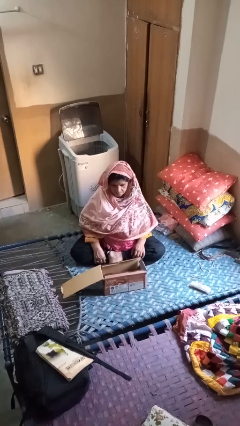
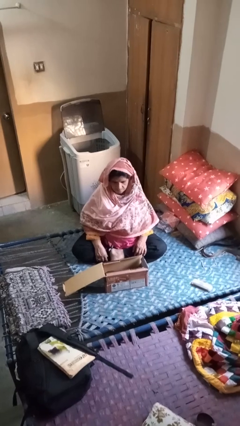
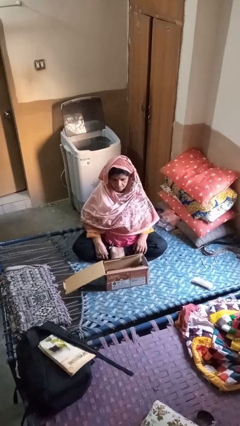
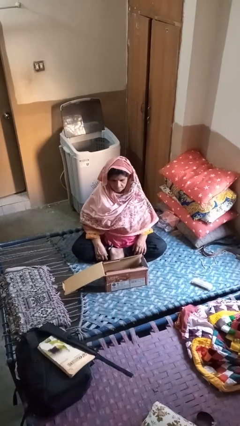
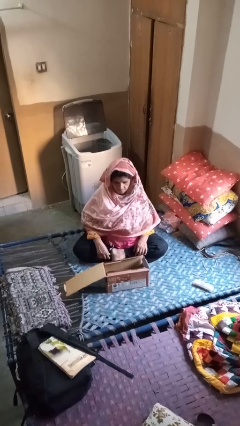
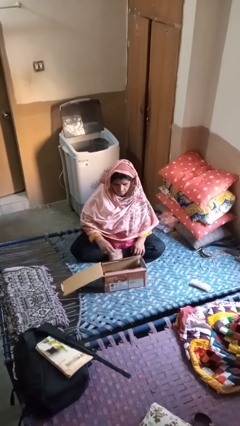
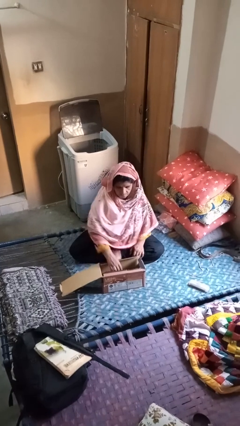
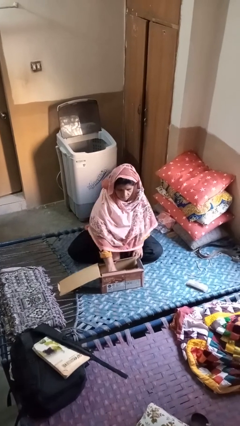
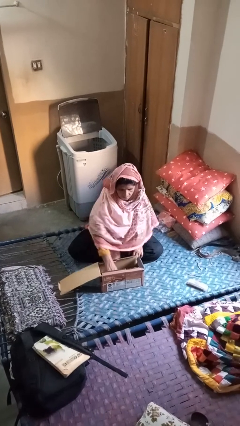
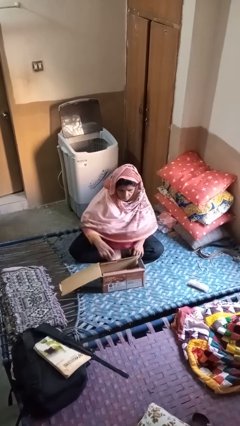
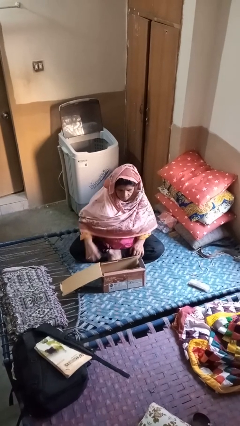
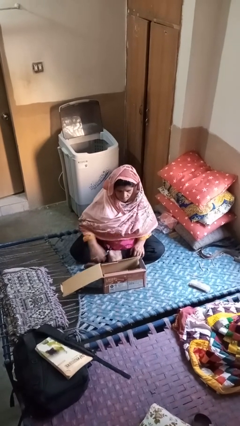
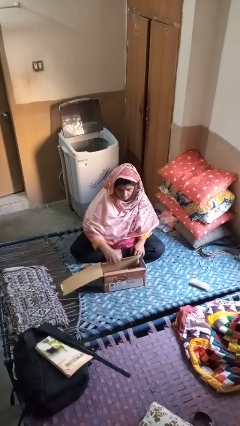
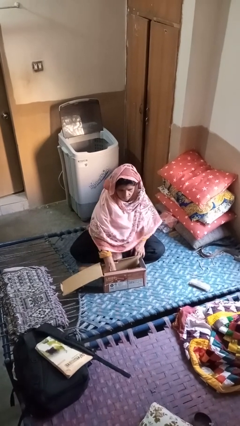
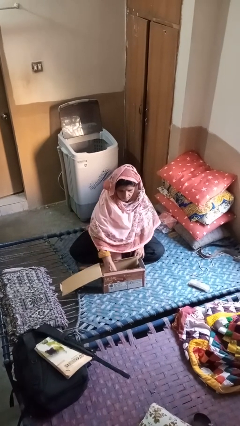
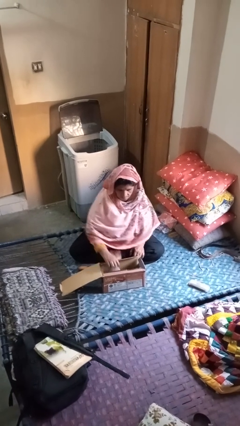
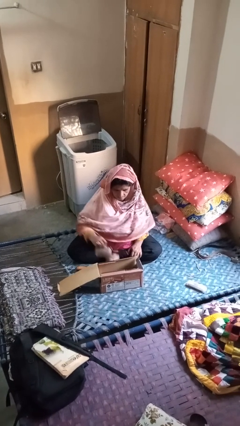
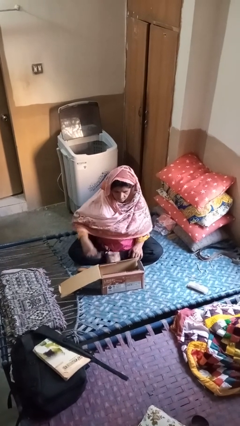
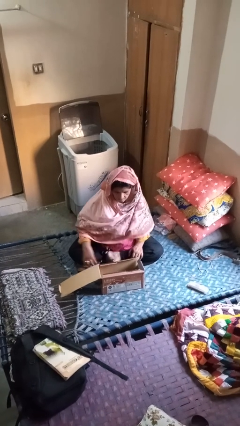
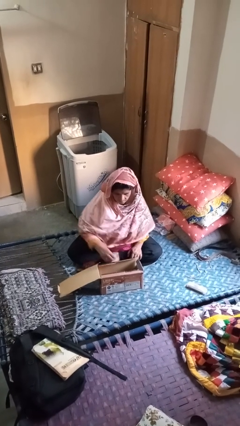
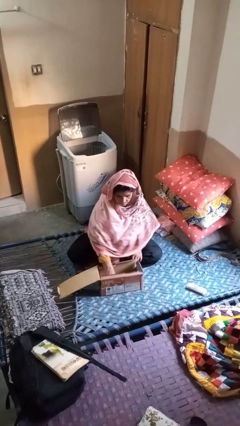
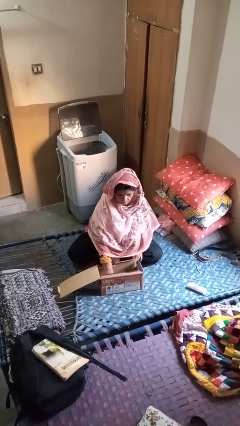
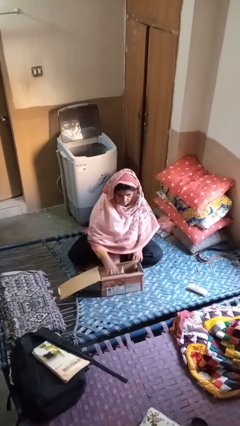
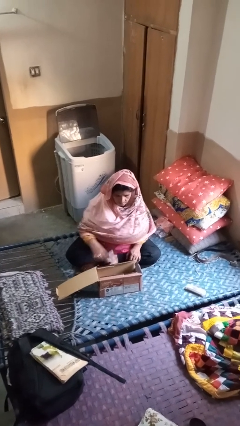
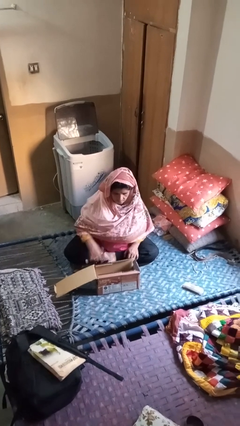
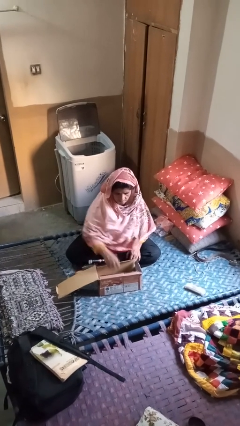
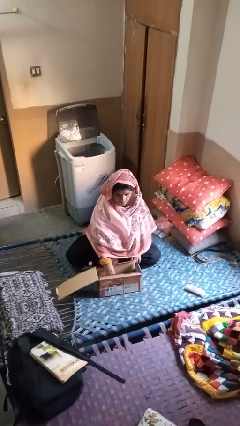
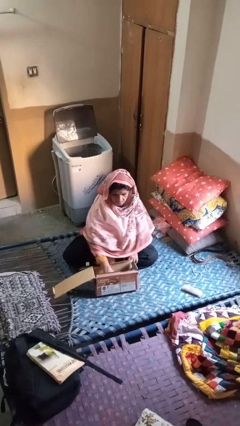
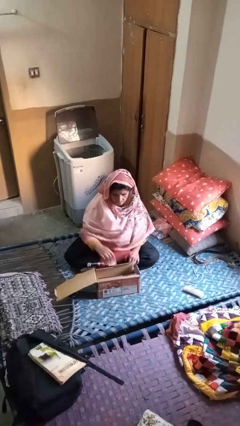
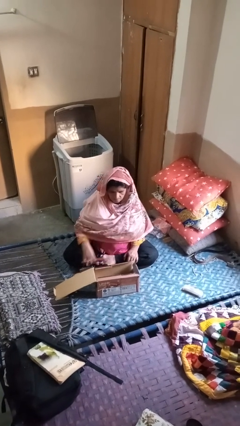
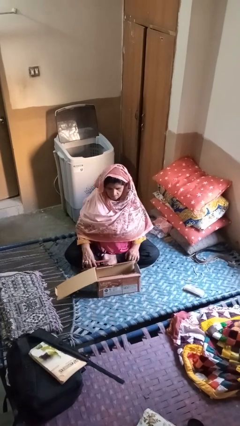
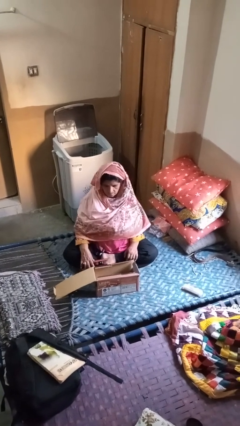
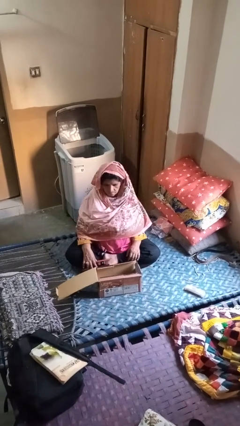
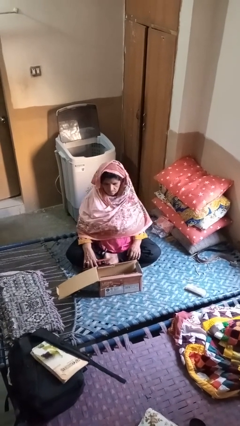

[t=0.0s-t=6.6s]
person takes object from box

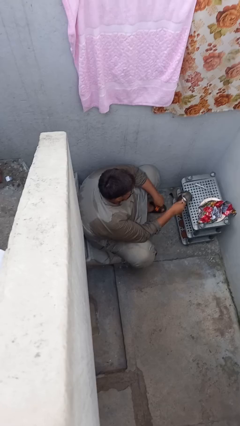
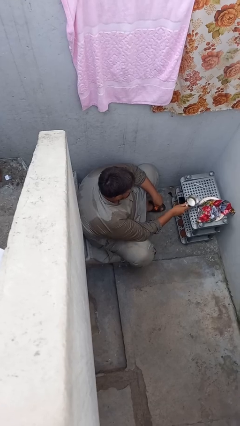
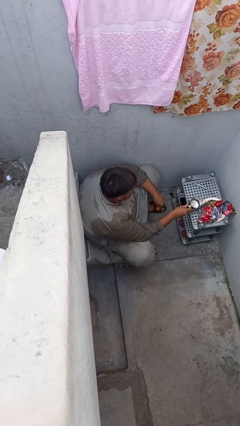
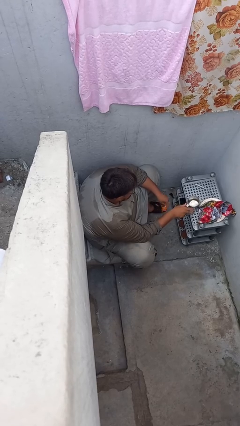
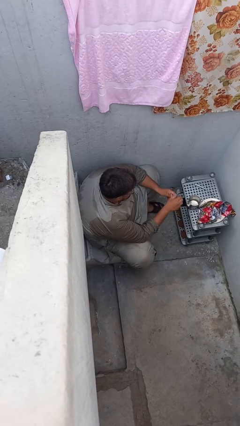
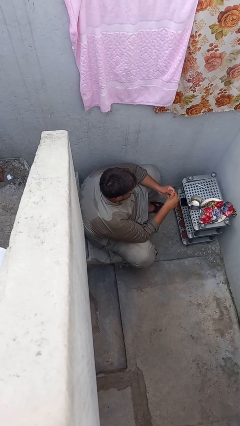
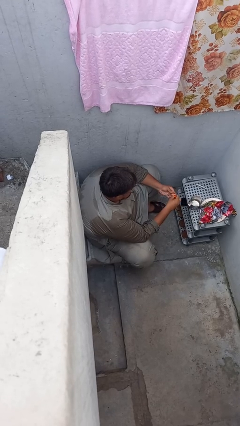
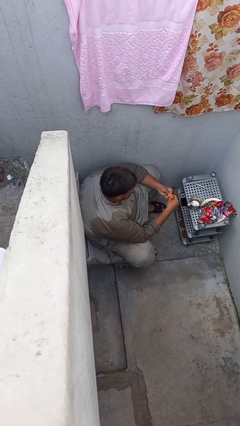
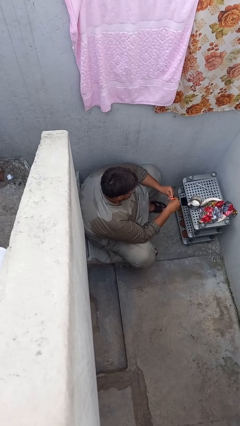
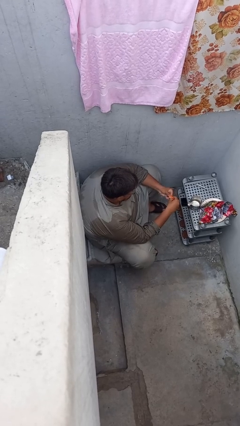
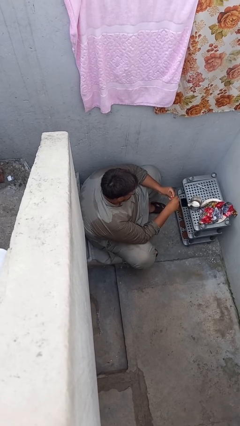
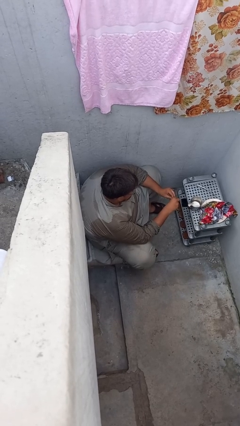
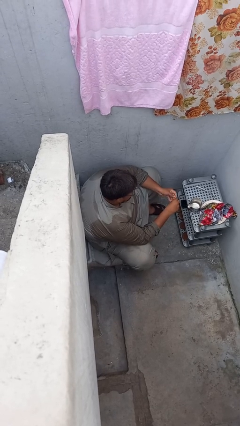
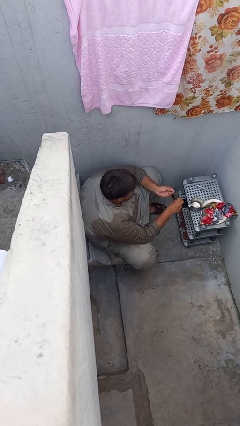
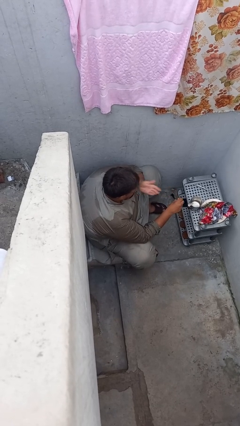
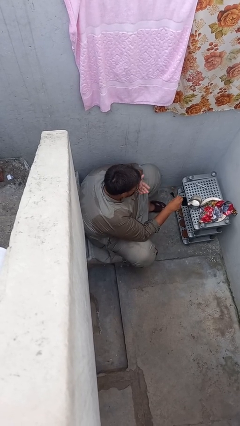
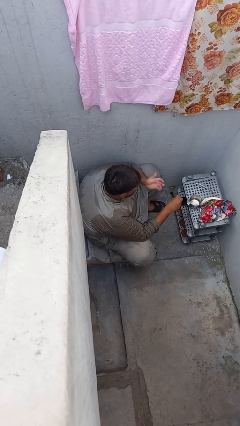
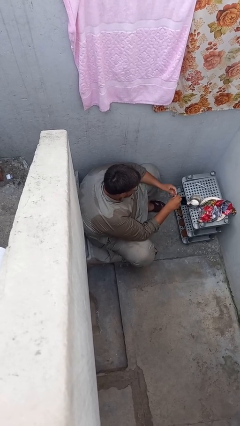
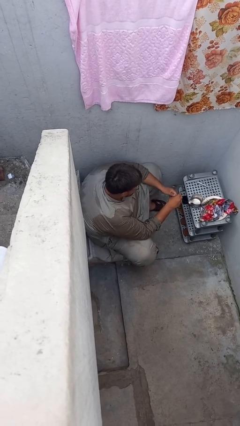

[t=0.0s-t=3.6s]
person takes medicine pills

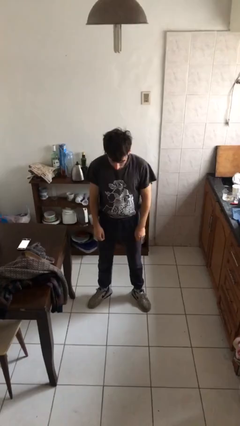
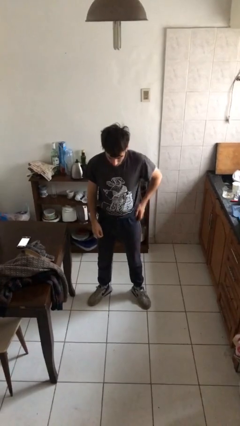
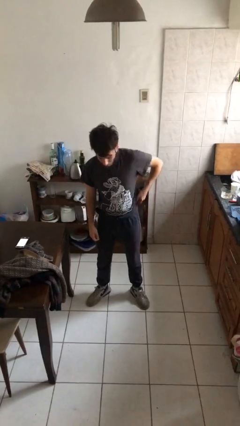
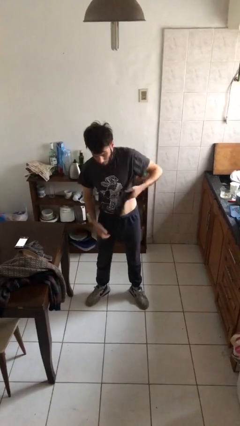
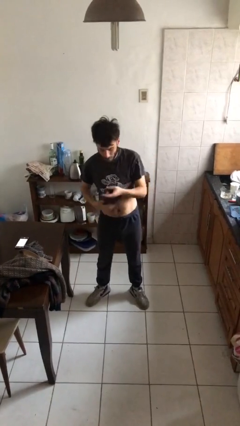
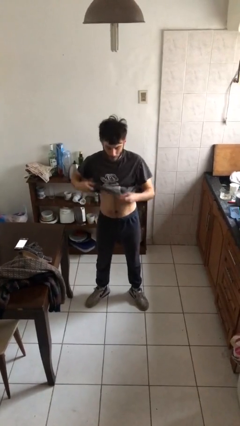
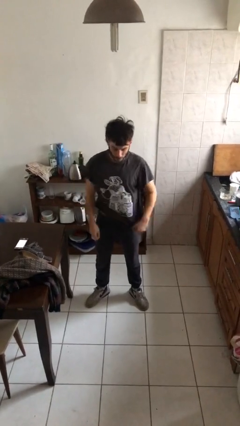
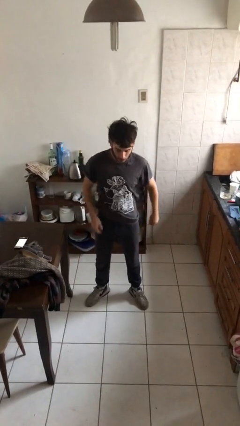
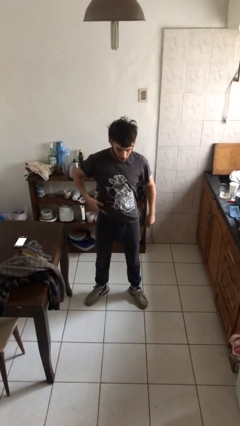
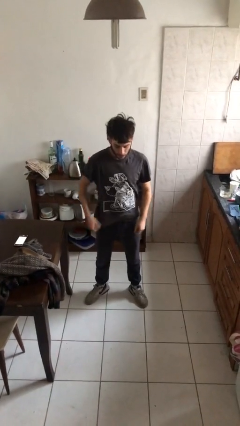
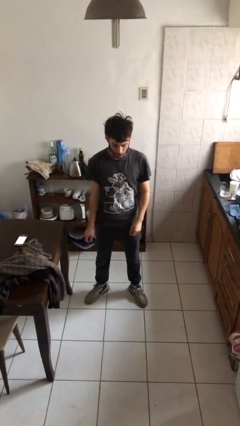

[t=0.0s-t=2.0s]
person untucks shirt

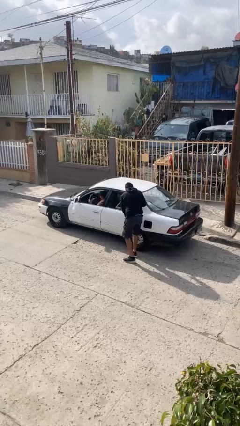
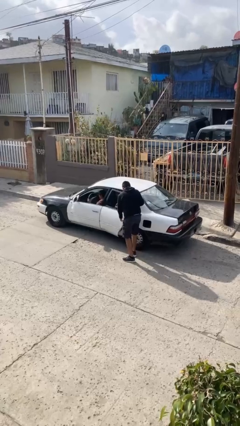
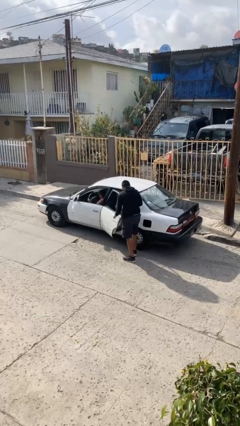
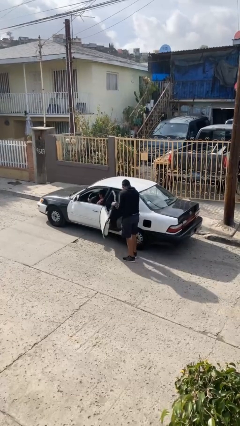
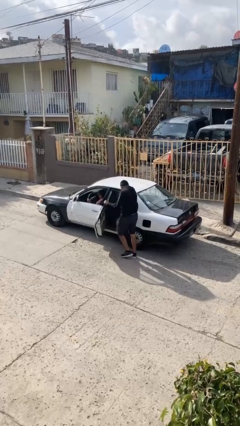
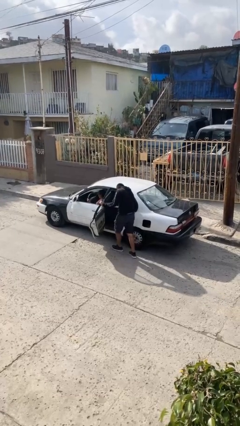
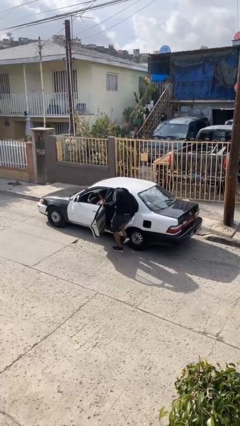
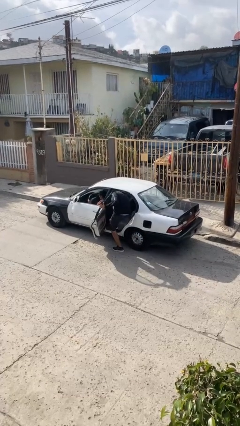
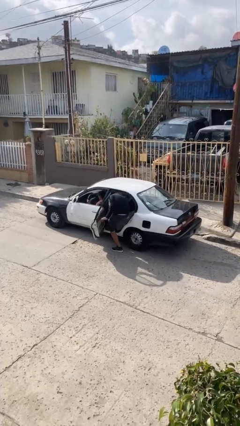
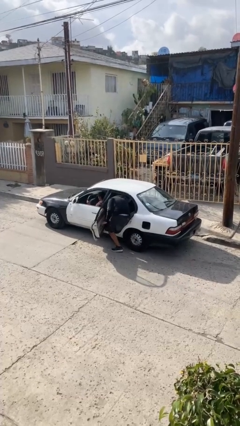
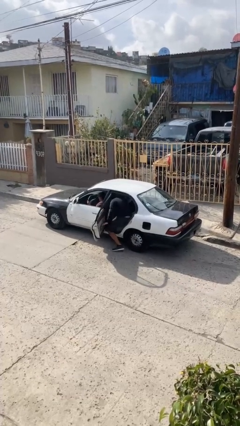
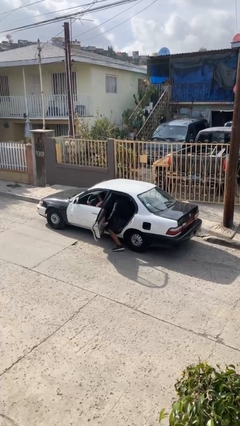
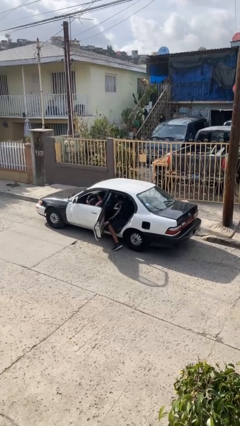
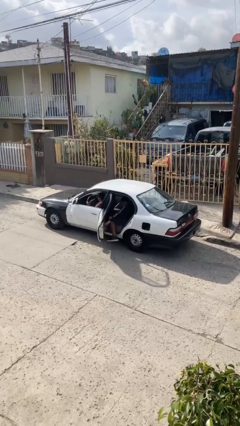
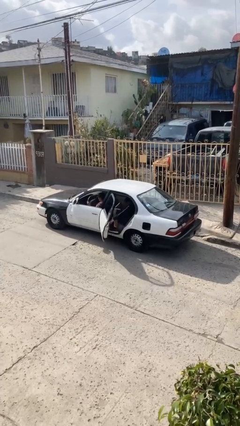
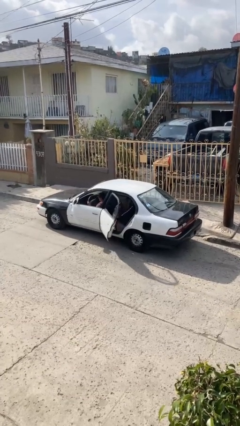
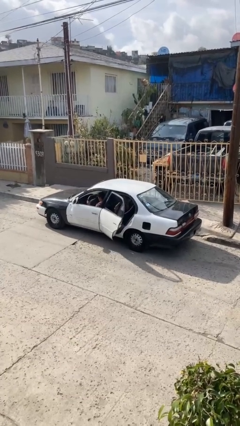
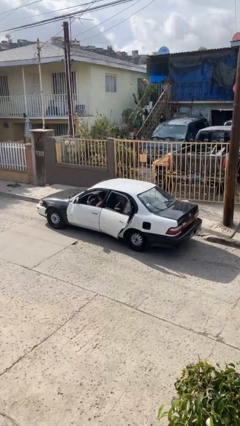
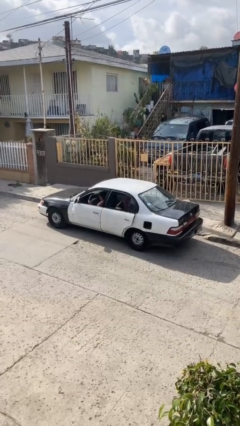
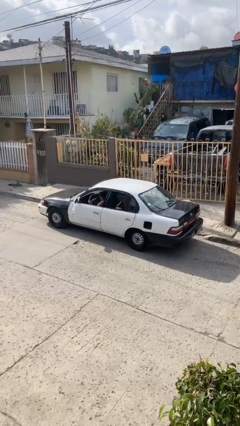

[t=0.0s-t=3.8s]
car picks up person

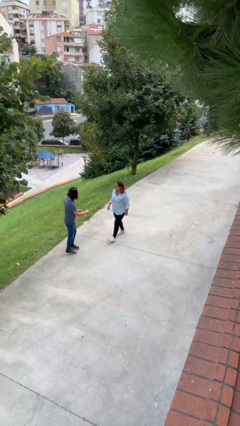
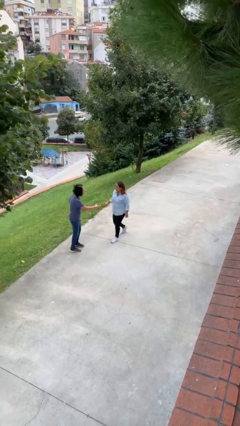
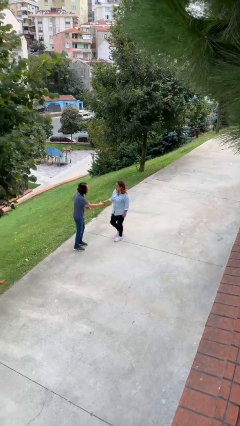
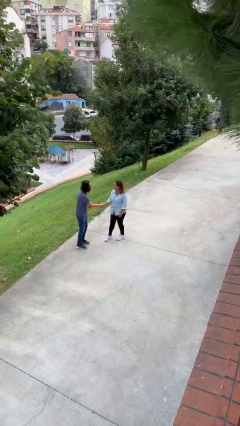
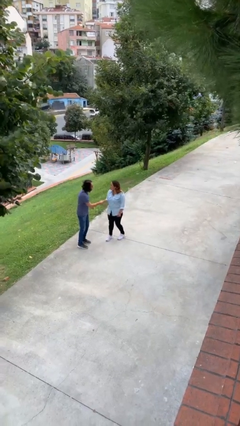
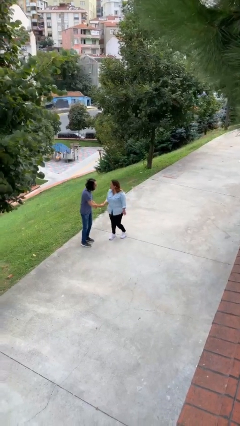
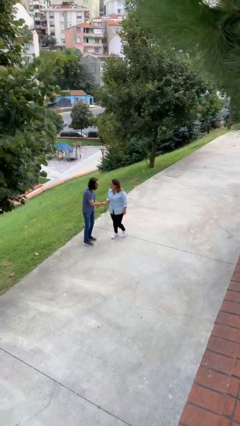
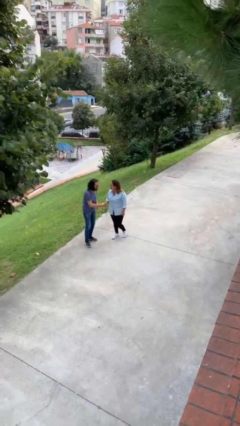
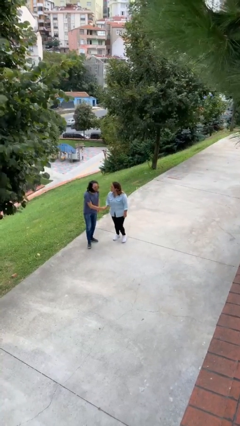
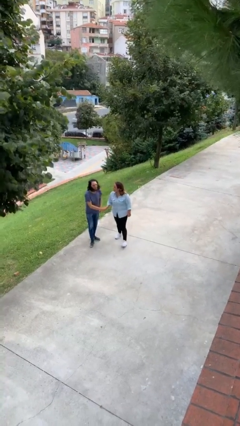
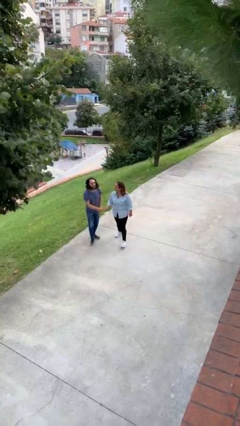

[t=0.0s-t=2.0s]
person shakes hand
